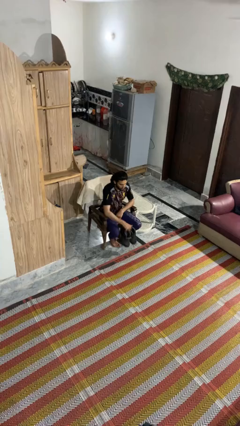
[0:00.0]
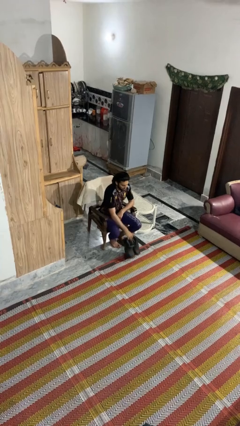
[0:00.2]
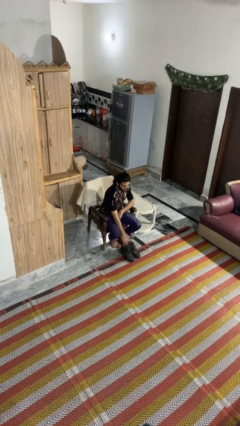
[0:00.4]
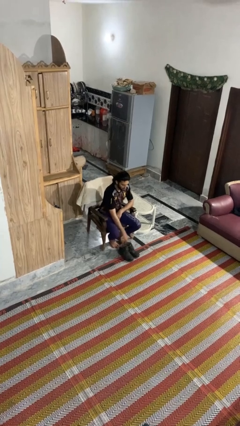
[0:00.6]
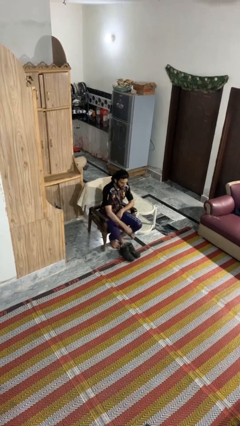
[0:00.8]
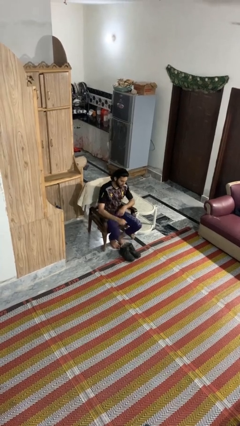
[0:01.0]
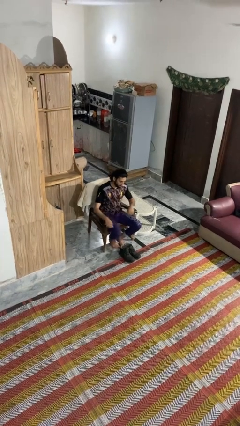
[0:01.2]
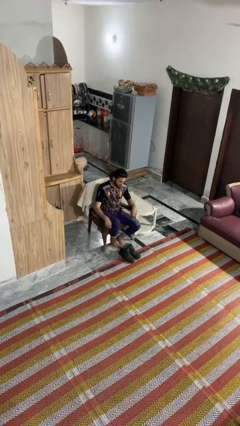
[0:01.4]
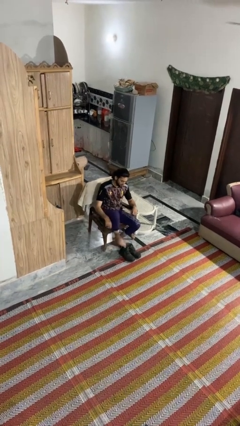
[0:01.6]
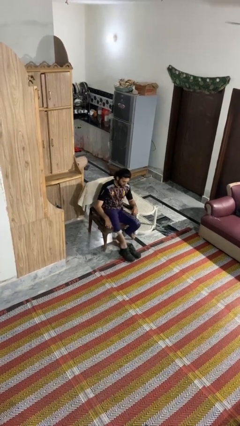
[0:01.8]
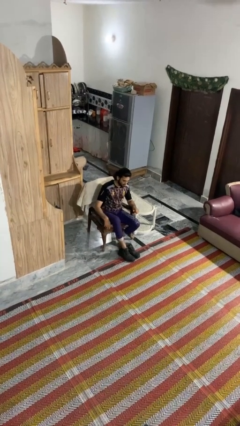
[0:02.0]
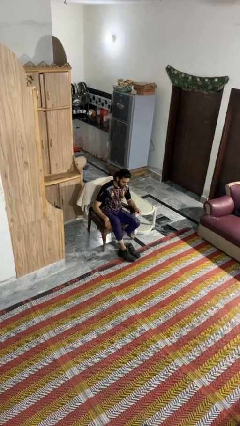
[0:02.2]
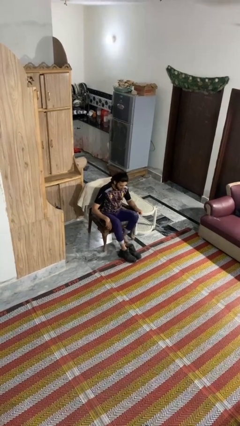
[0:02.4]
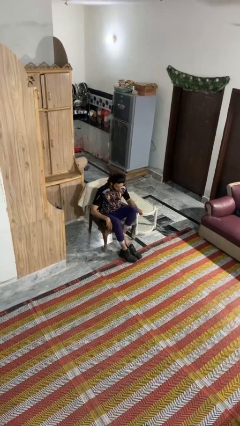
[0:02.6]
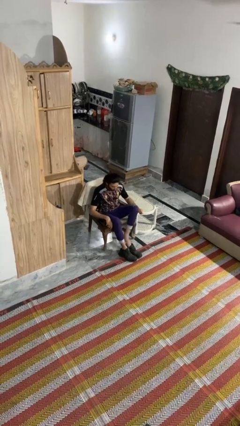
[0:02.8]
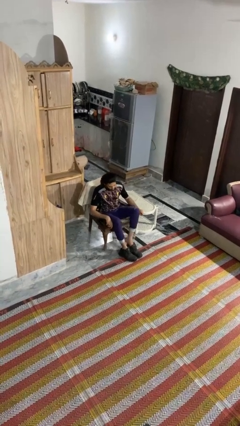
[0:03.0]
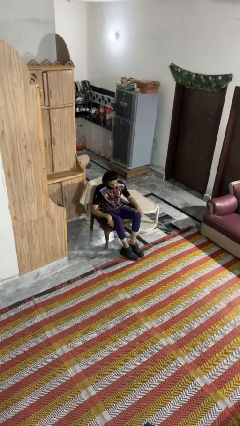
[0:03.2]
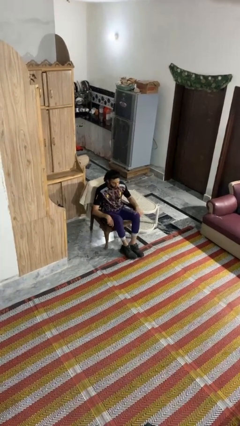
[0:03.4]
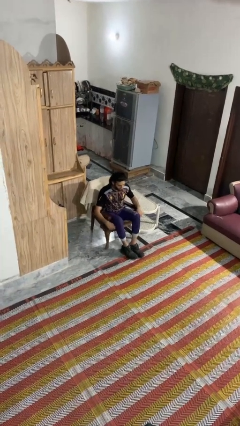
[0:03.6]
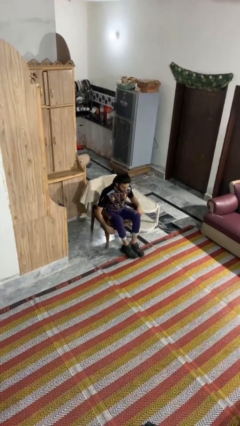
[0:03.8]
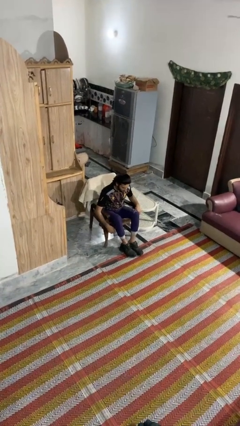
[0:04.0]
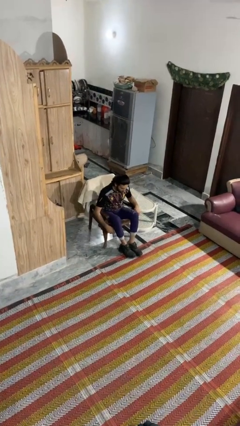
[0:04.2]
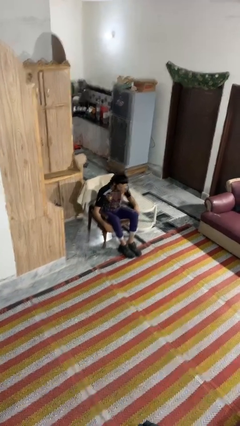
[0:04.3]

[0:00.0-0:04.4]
person puts on boots

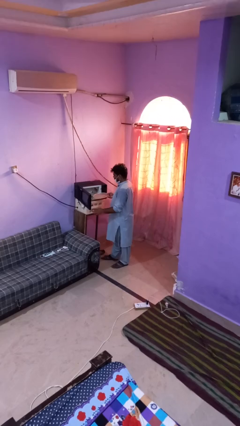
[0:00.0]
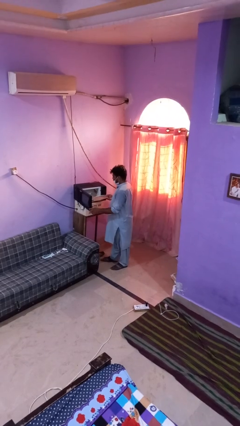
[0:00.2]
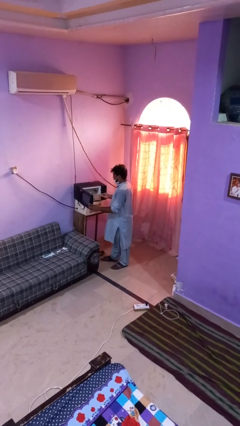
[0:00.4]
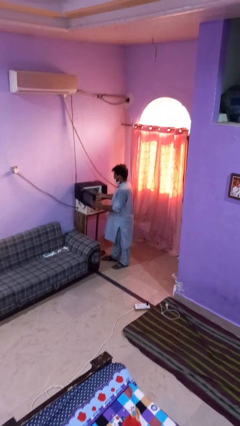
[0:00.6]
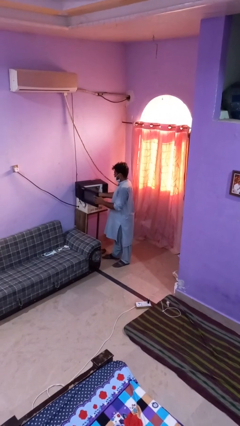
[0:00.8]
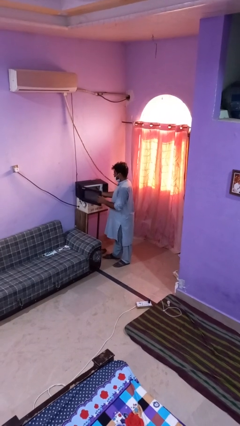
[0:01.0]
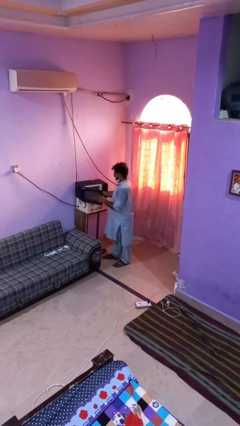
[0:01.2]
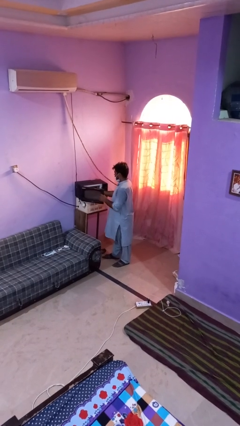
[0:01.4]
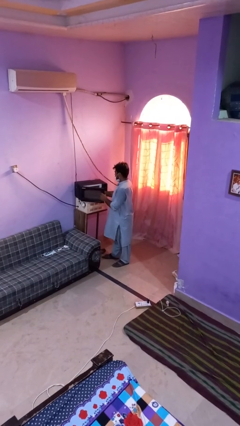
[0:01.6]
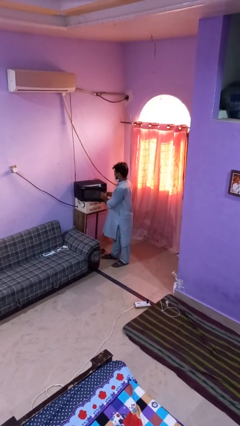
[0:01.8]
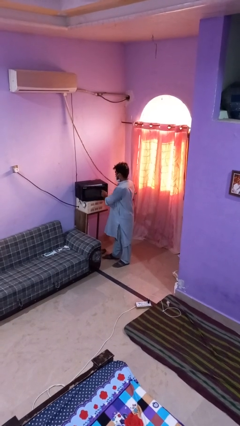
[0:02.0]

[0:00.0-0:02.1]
person puts object into oven

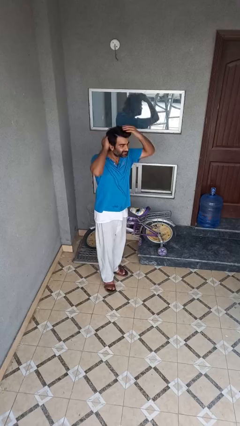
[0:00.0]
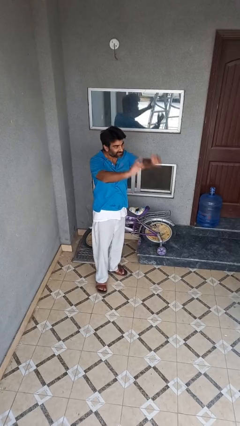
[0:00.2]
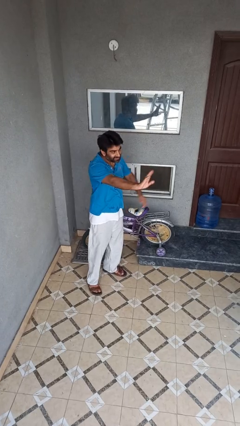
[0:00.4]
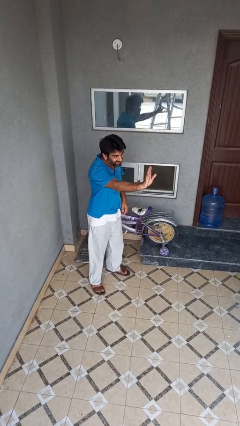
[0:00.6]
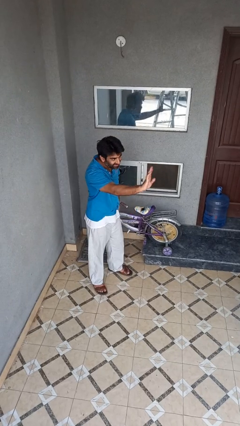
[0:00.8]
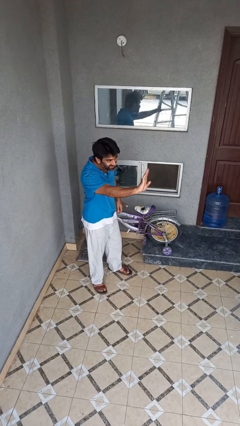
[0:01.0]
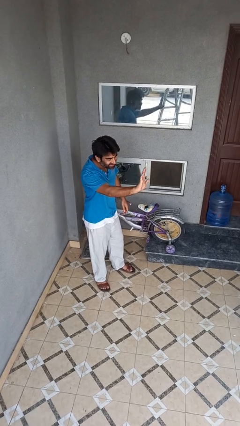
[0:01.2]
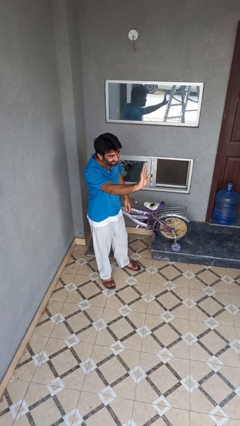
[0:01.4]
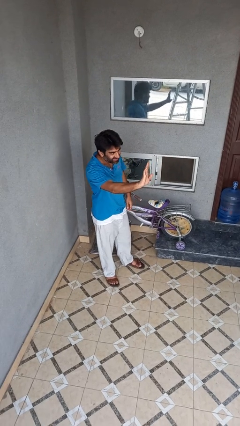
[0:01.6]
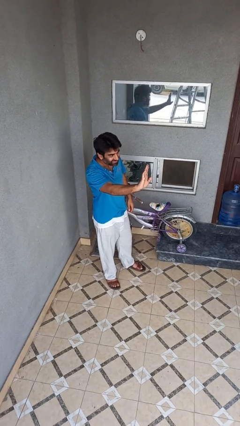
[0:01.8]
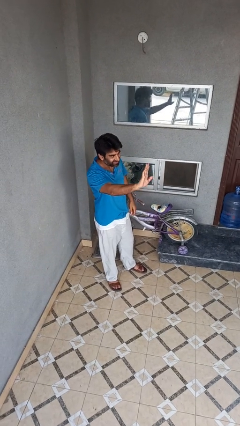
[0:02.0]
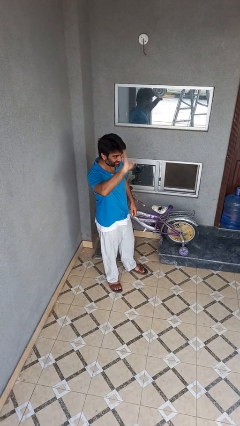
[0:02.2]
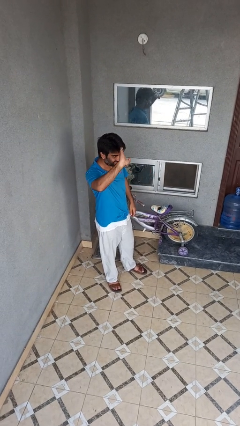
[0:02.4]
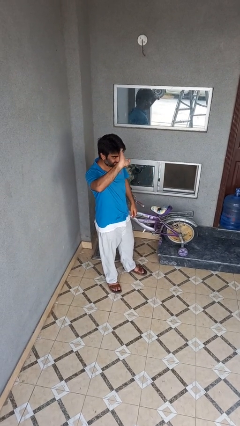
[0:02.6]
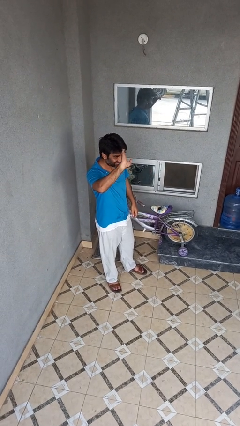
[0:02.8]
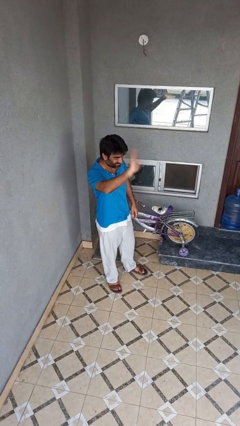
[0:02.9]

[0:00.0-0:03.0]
person waves at person

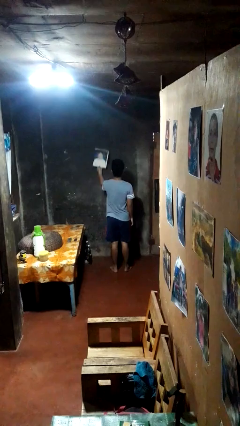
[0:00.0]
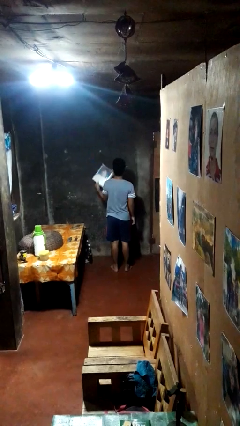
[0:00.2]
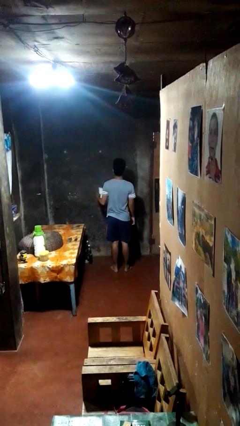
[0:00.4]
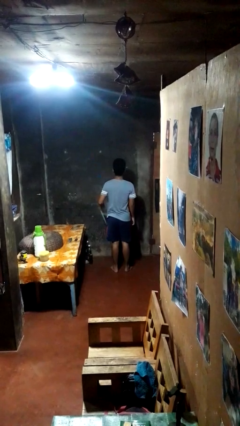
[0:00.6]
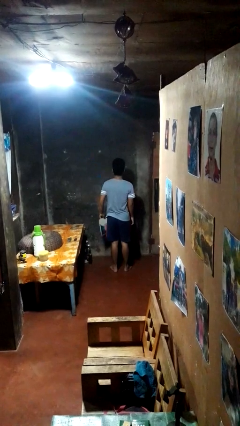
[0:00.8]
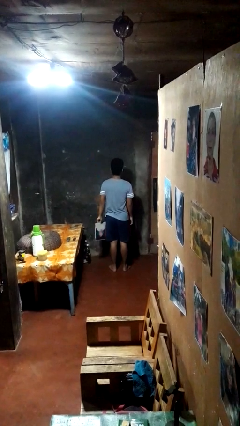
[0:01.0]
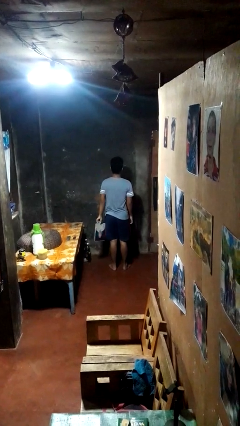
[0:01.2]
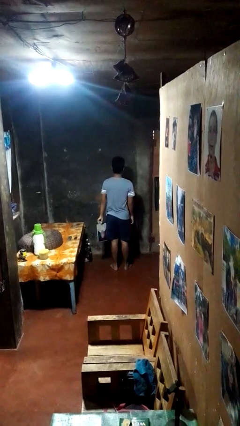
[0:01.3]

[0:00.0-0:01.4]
person takes down picture frame

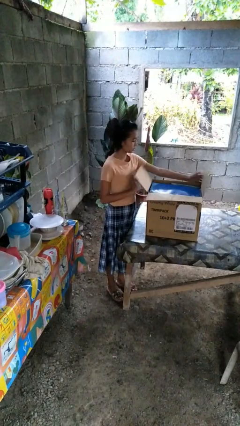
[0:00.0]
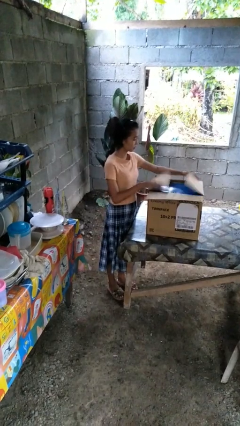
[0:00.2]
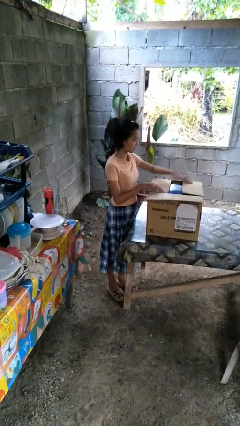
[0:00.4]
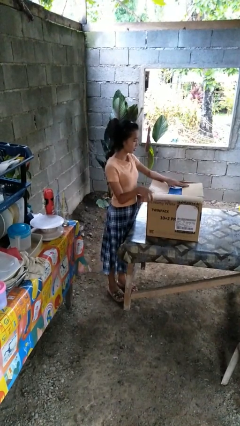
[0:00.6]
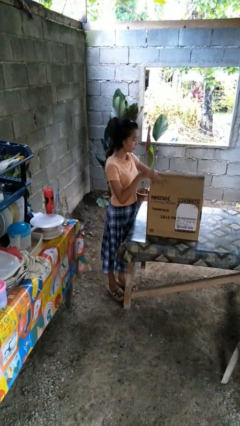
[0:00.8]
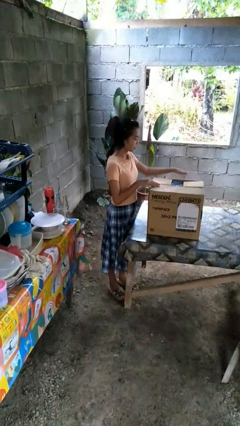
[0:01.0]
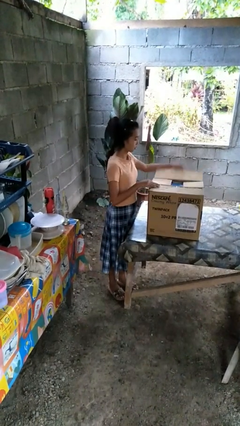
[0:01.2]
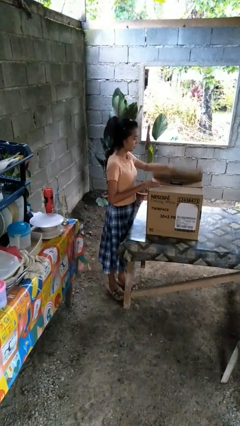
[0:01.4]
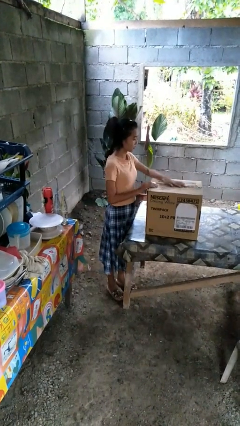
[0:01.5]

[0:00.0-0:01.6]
person closes box

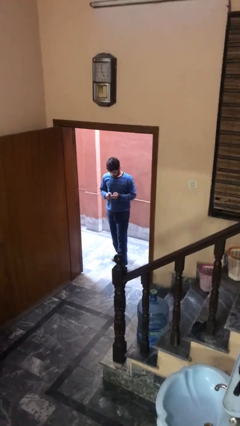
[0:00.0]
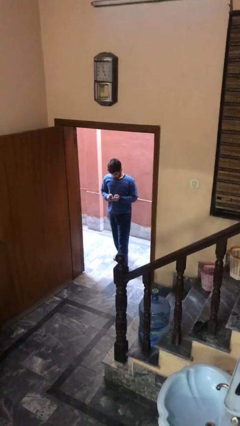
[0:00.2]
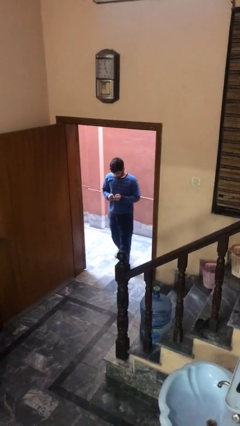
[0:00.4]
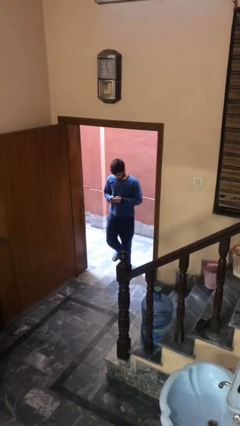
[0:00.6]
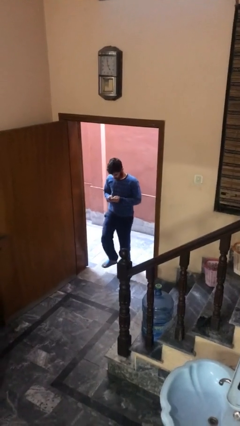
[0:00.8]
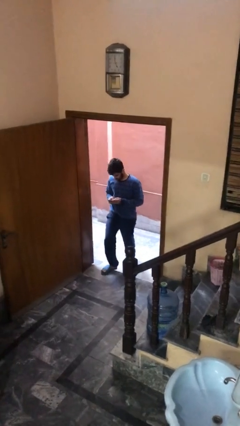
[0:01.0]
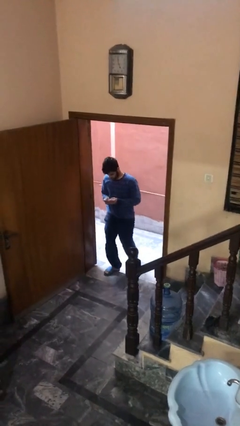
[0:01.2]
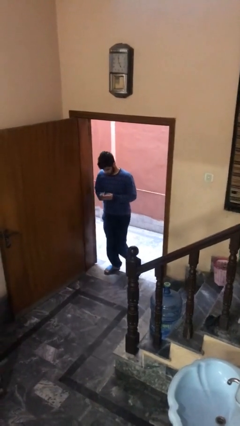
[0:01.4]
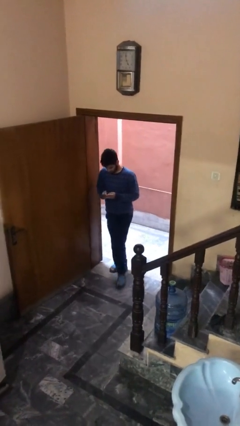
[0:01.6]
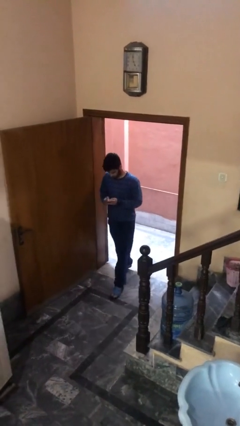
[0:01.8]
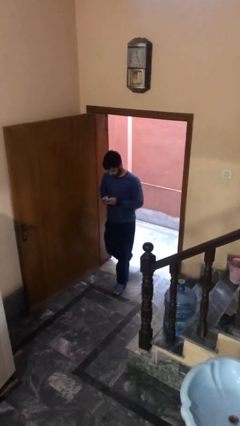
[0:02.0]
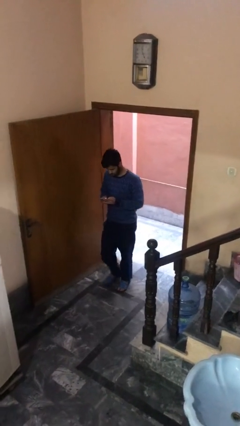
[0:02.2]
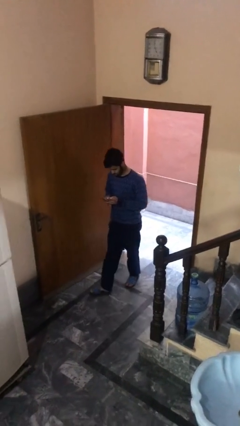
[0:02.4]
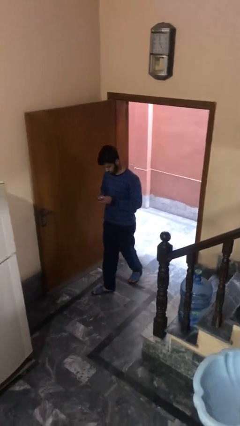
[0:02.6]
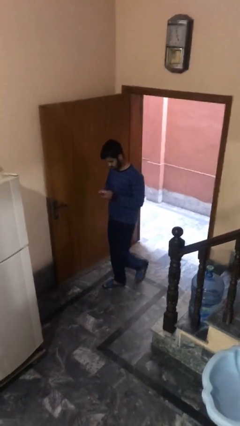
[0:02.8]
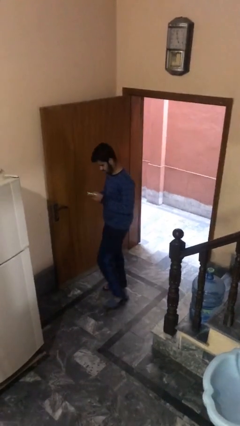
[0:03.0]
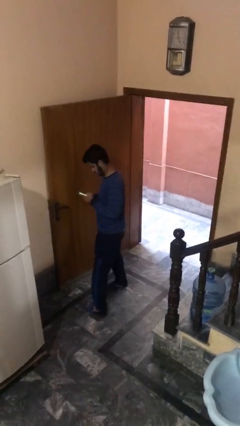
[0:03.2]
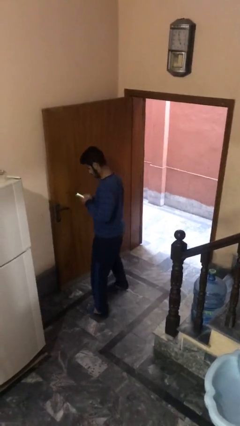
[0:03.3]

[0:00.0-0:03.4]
person enters scene through structure

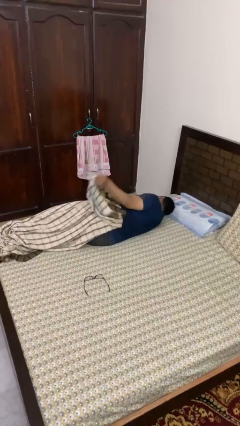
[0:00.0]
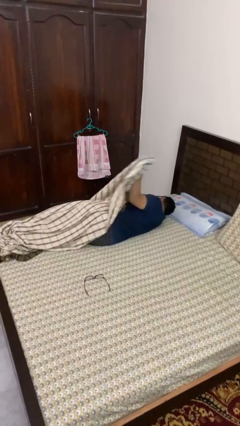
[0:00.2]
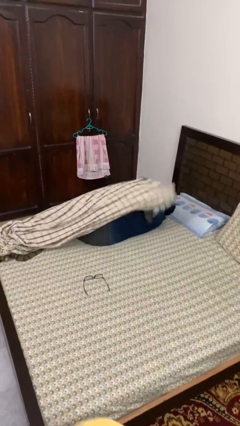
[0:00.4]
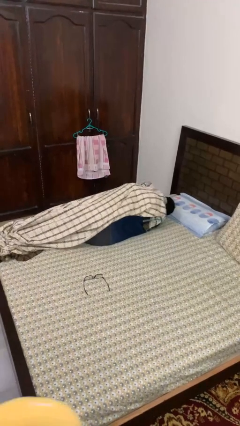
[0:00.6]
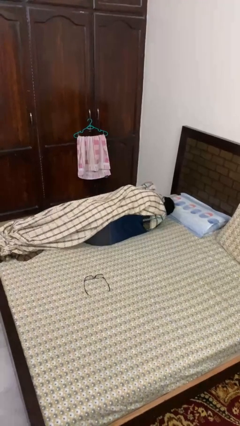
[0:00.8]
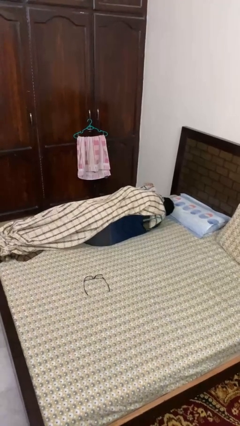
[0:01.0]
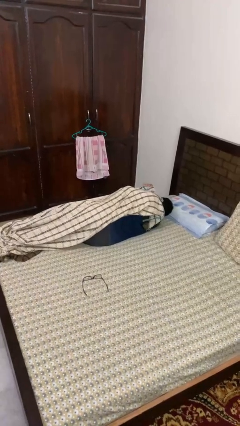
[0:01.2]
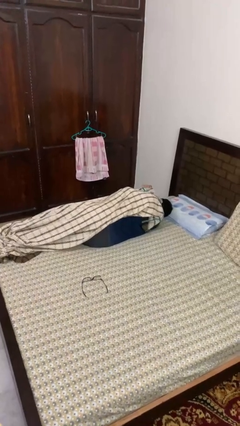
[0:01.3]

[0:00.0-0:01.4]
person covers with blanket
